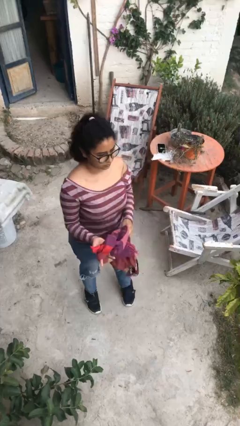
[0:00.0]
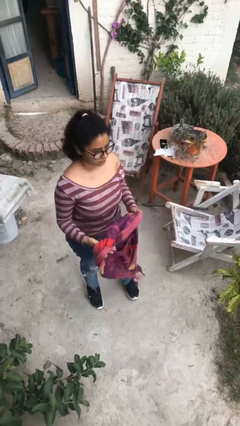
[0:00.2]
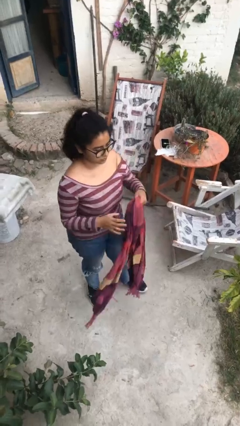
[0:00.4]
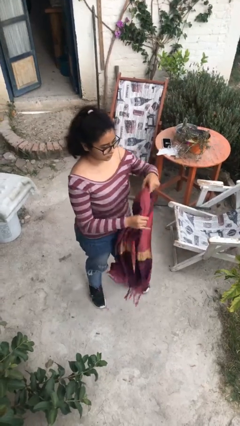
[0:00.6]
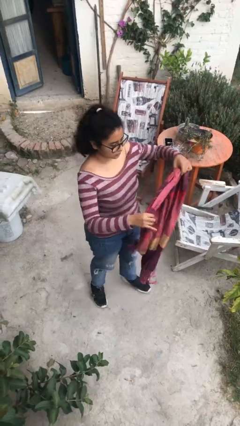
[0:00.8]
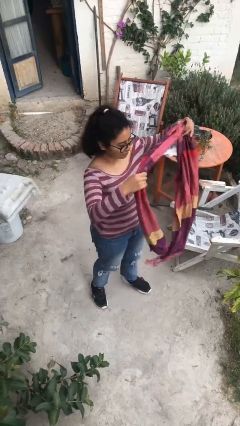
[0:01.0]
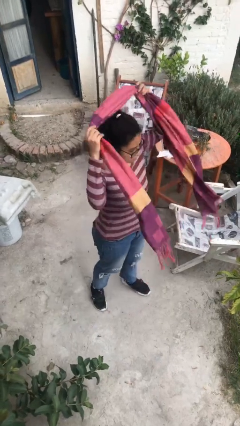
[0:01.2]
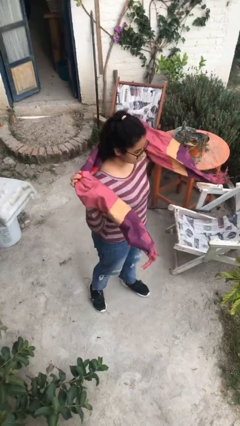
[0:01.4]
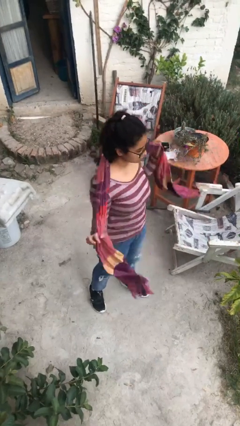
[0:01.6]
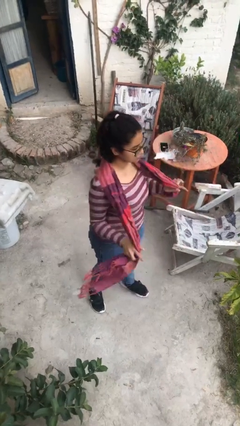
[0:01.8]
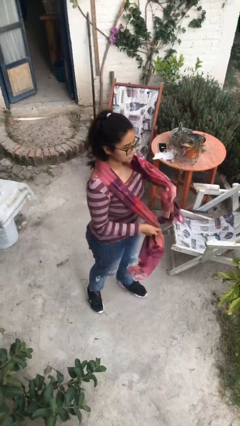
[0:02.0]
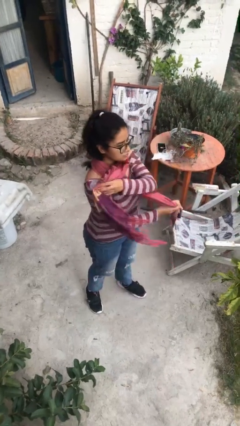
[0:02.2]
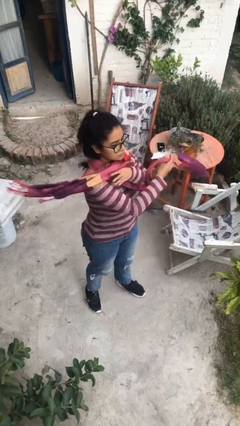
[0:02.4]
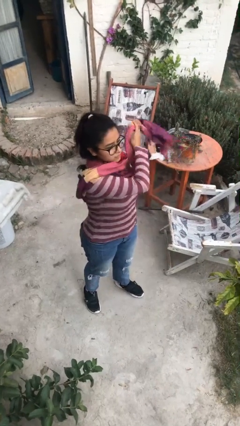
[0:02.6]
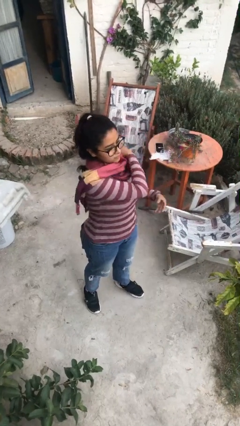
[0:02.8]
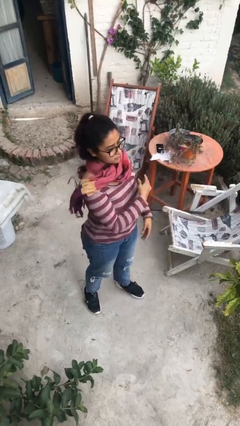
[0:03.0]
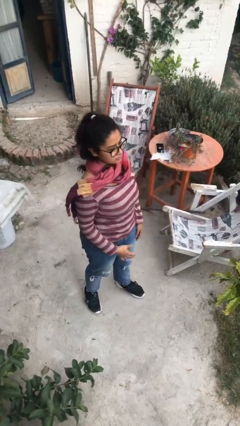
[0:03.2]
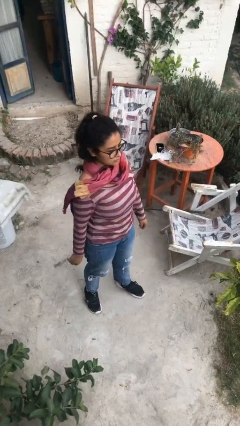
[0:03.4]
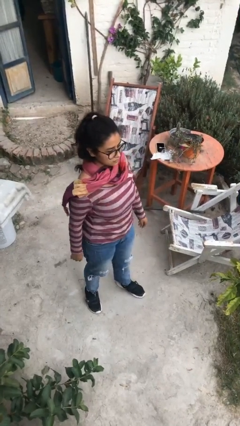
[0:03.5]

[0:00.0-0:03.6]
person puts on scarf

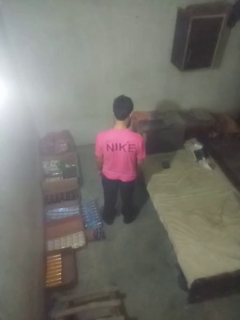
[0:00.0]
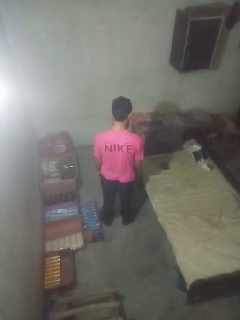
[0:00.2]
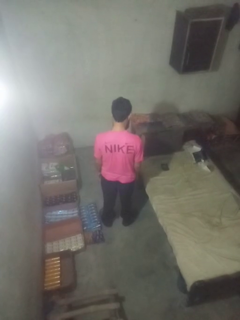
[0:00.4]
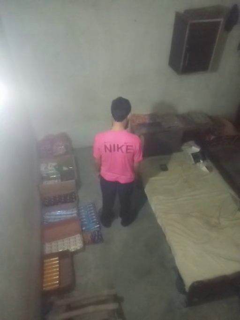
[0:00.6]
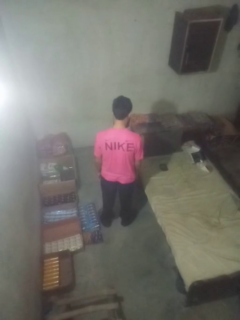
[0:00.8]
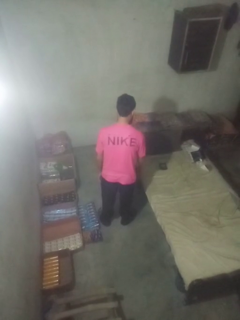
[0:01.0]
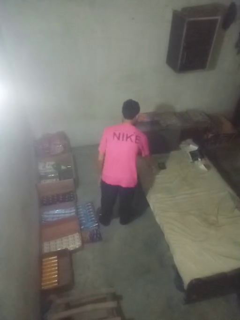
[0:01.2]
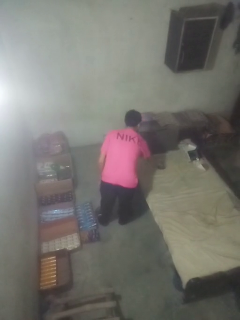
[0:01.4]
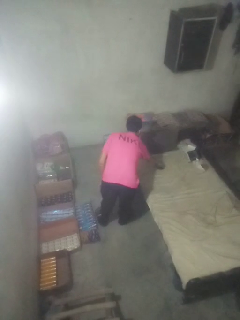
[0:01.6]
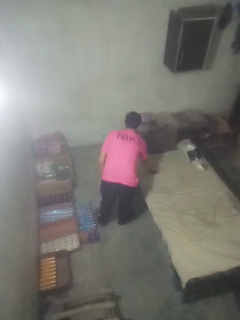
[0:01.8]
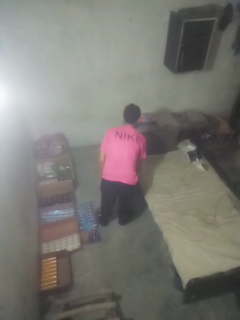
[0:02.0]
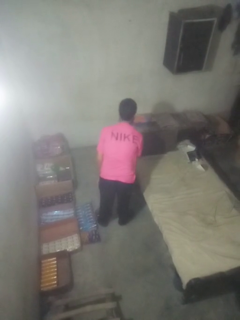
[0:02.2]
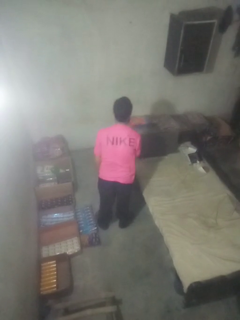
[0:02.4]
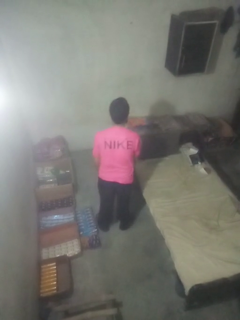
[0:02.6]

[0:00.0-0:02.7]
person picks up object from bed

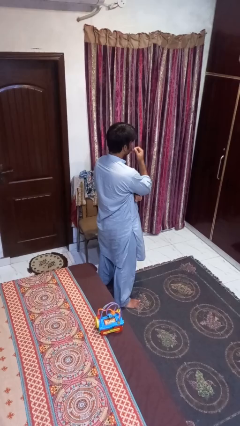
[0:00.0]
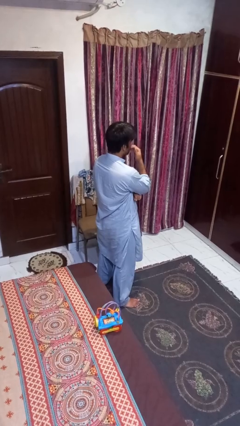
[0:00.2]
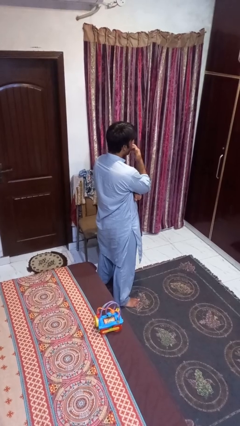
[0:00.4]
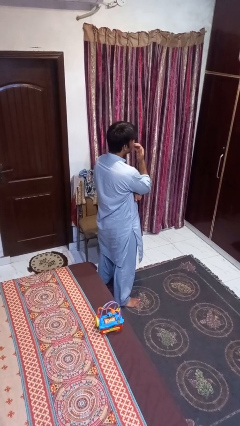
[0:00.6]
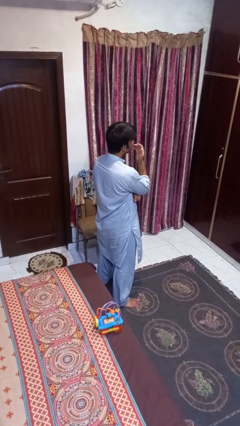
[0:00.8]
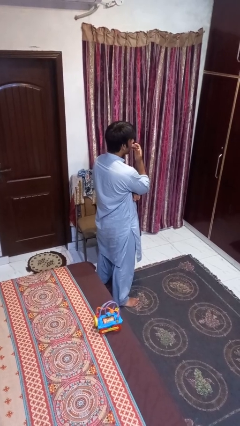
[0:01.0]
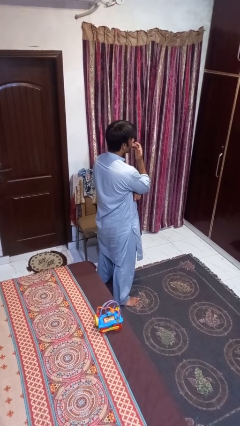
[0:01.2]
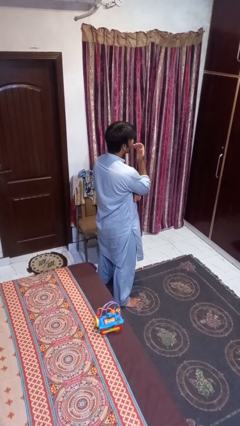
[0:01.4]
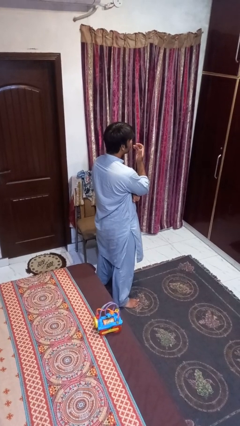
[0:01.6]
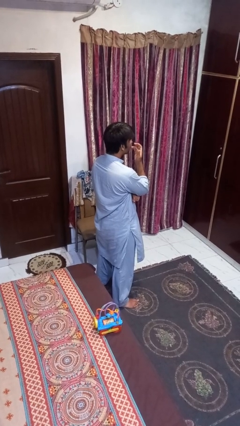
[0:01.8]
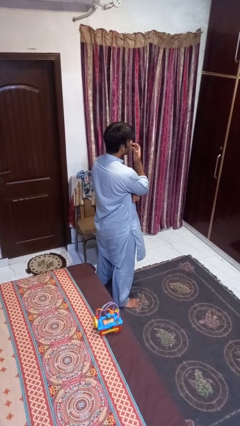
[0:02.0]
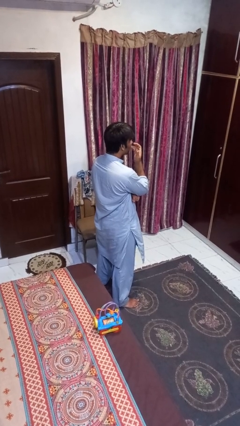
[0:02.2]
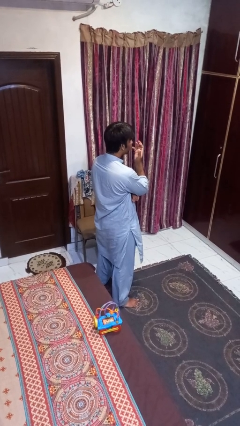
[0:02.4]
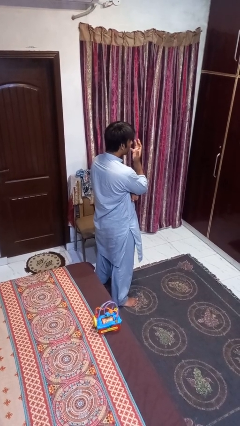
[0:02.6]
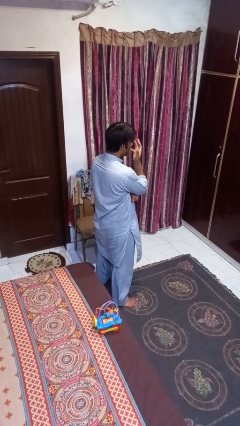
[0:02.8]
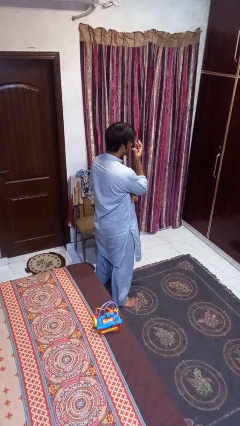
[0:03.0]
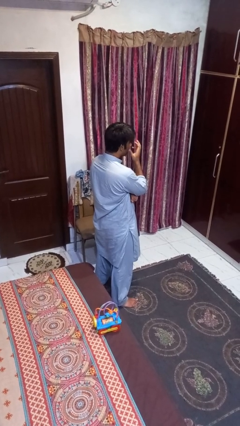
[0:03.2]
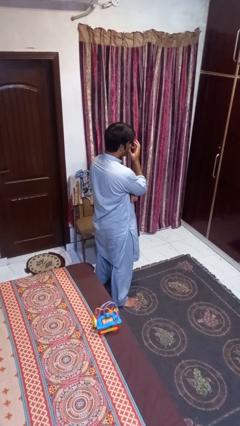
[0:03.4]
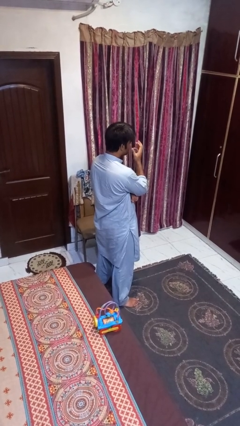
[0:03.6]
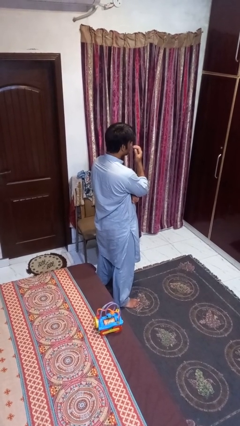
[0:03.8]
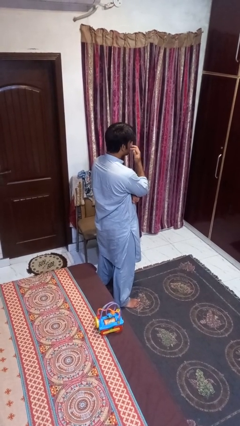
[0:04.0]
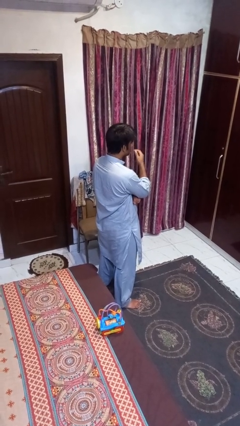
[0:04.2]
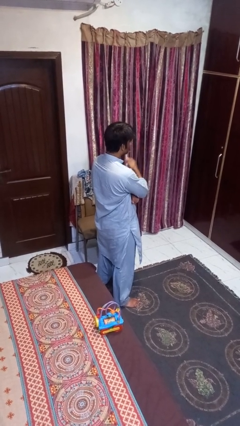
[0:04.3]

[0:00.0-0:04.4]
person licks fingers

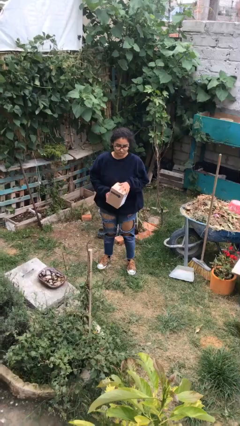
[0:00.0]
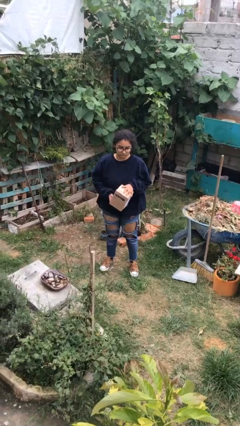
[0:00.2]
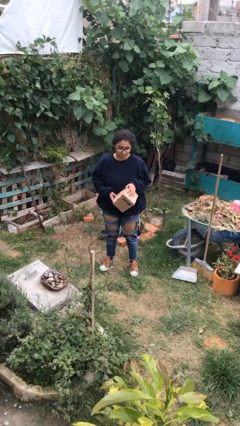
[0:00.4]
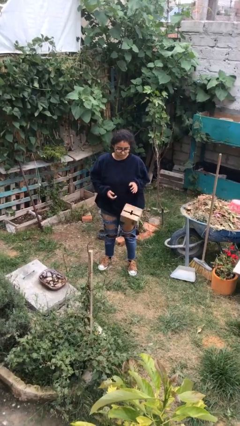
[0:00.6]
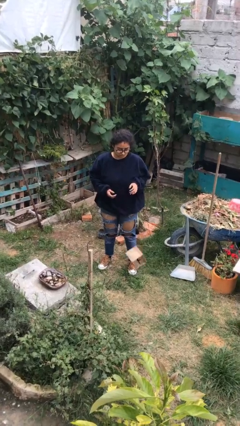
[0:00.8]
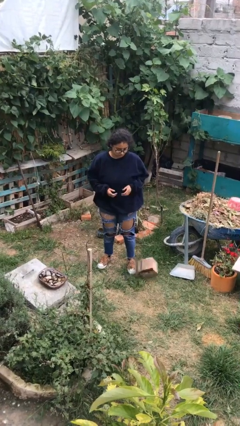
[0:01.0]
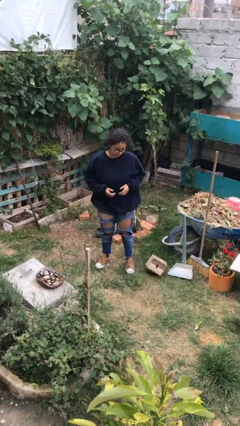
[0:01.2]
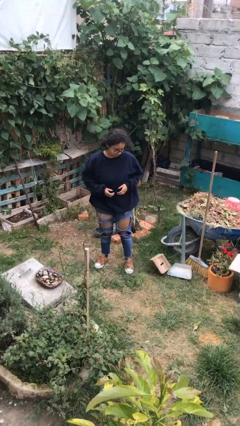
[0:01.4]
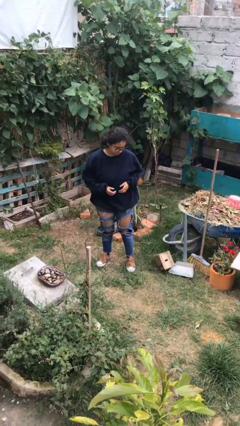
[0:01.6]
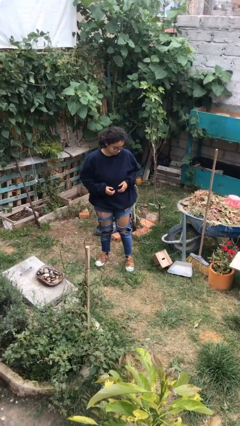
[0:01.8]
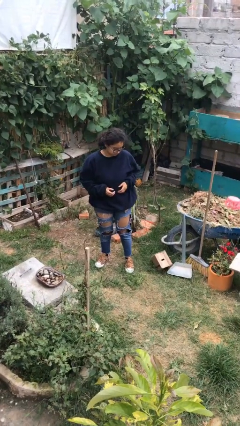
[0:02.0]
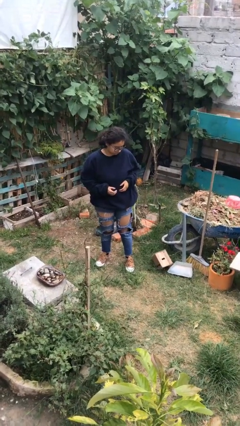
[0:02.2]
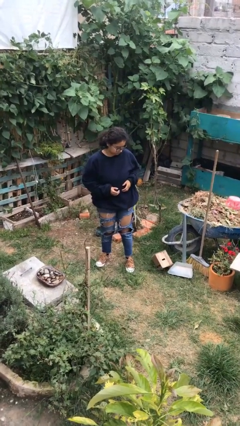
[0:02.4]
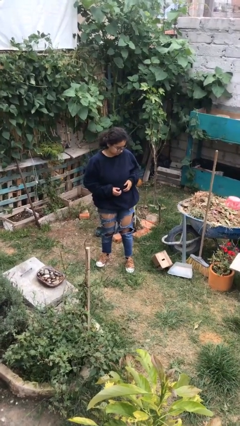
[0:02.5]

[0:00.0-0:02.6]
person drops object

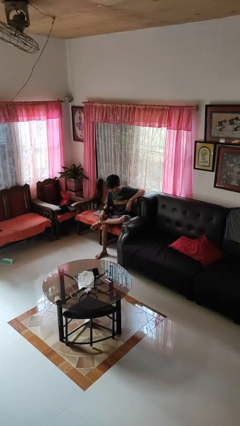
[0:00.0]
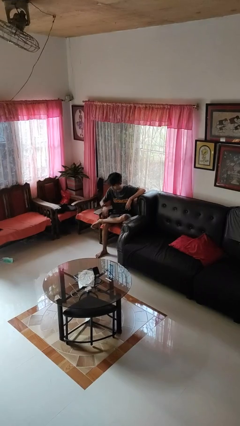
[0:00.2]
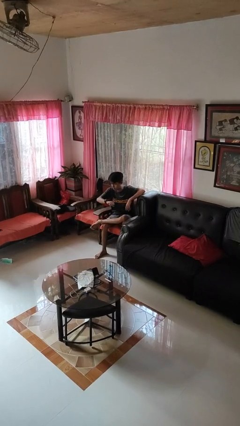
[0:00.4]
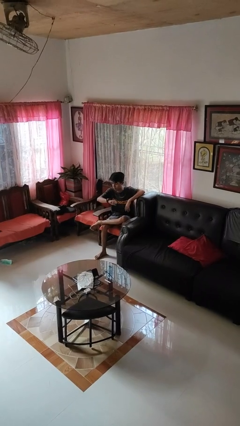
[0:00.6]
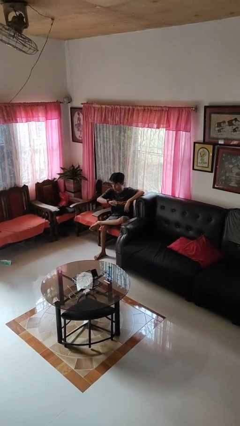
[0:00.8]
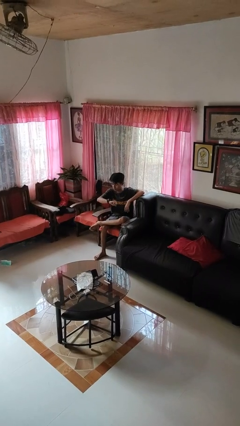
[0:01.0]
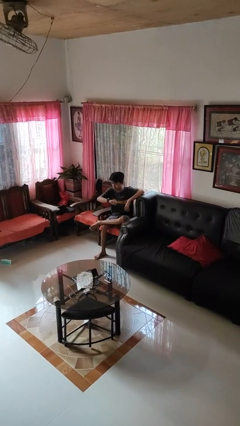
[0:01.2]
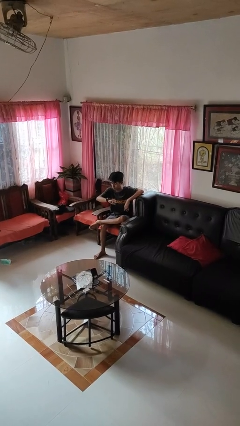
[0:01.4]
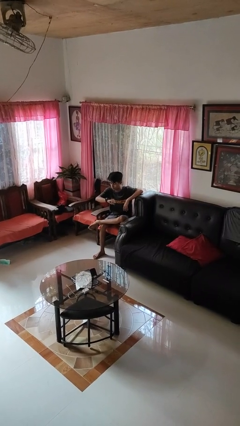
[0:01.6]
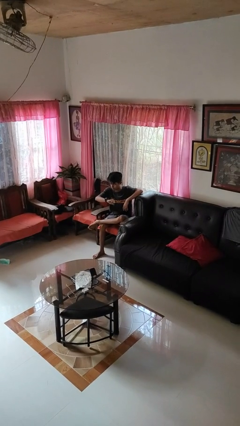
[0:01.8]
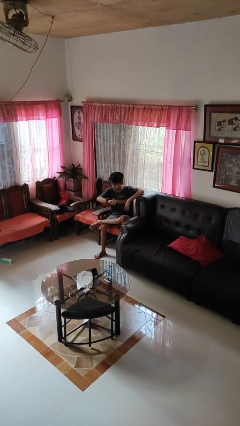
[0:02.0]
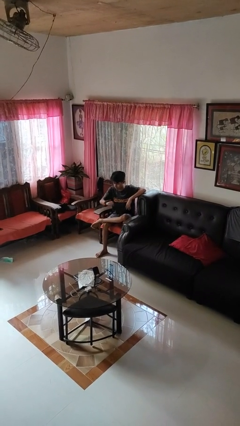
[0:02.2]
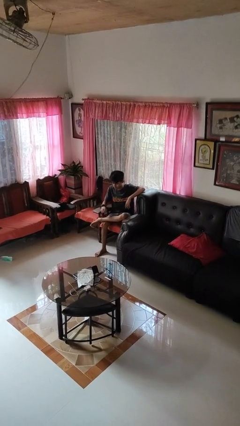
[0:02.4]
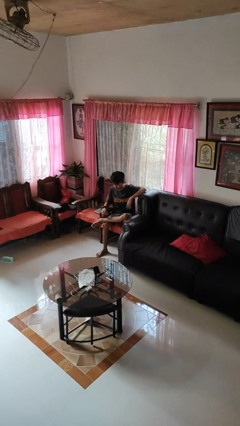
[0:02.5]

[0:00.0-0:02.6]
person looks at wristwatch

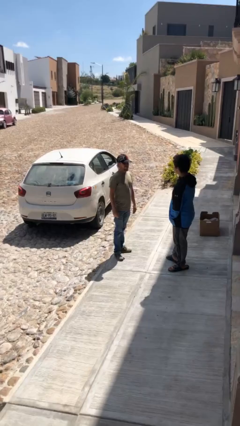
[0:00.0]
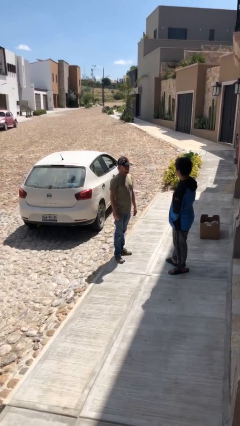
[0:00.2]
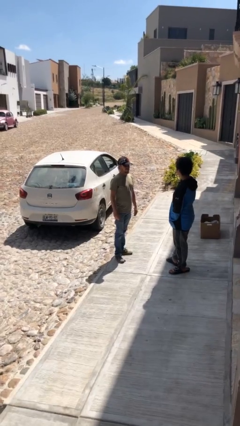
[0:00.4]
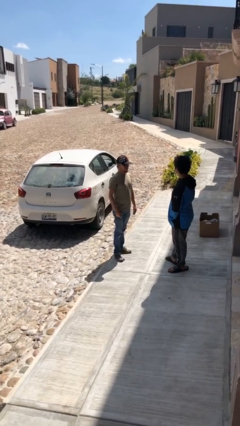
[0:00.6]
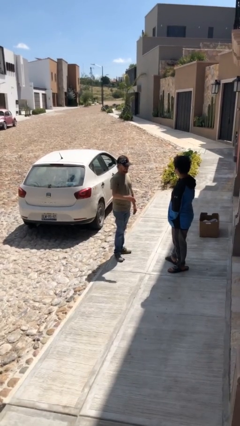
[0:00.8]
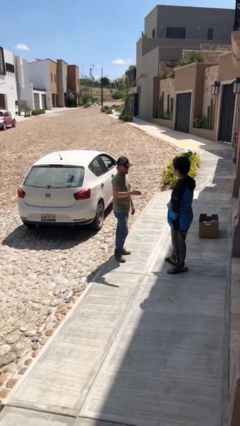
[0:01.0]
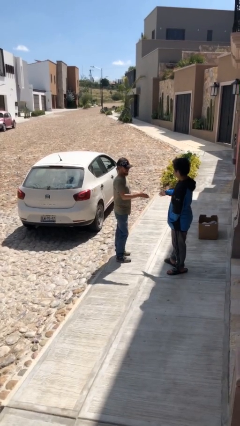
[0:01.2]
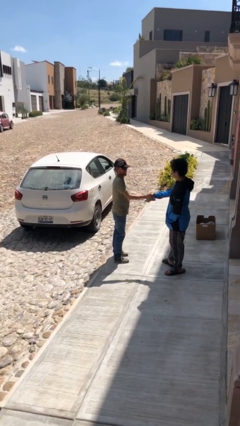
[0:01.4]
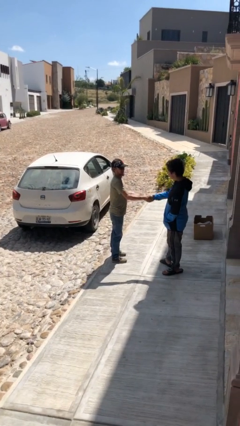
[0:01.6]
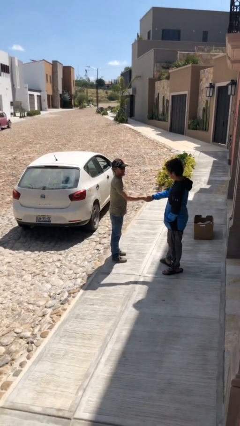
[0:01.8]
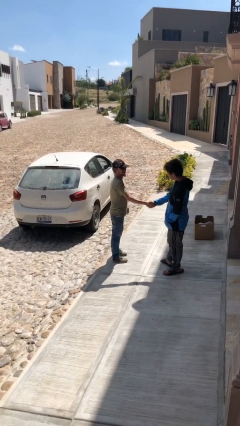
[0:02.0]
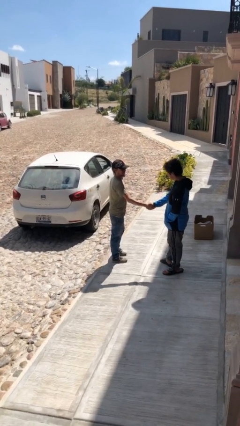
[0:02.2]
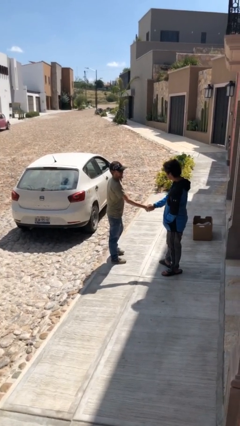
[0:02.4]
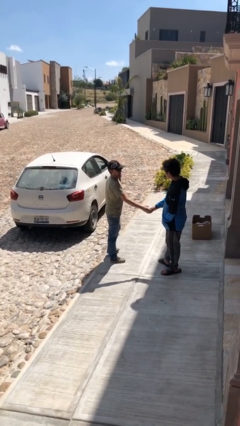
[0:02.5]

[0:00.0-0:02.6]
person shakes hand
